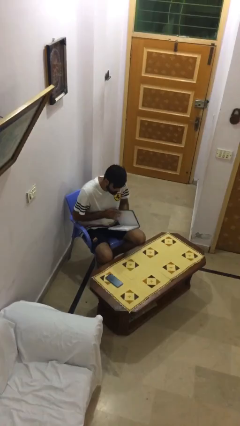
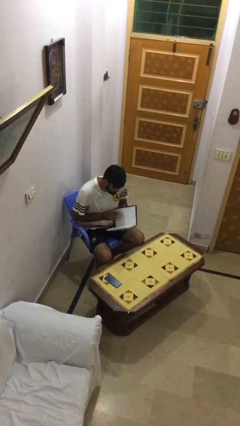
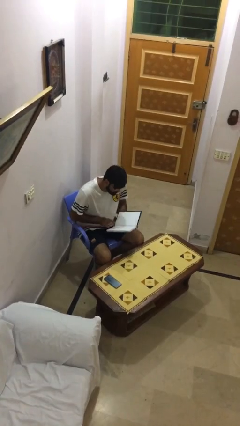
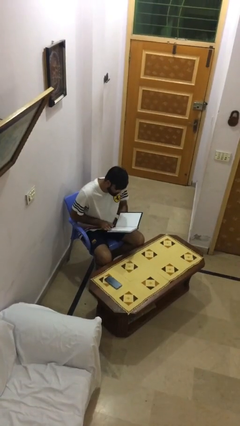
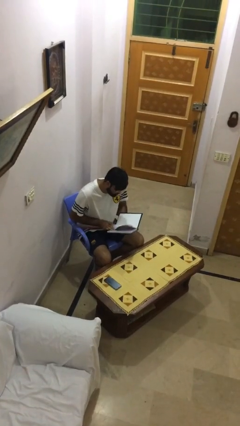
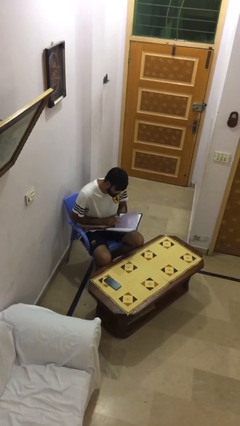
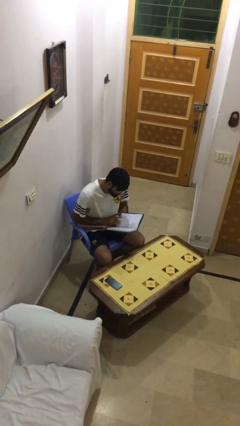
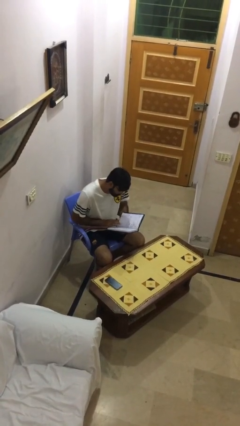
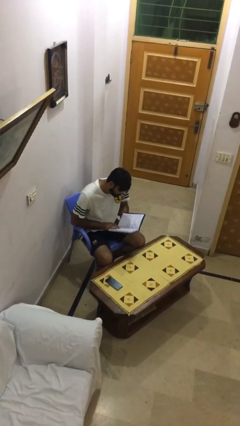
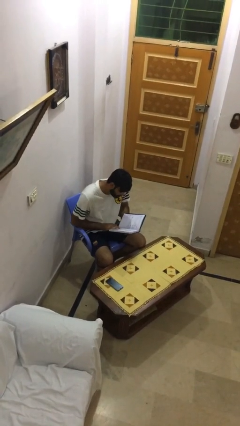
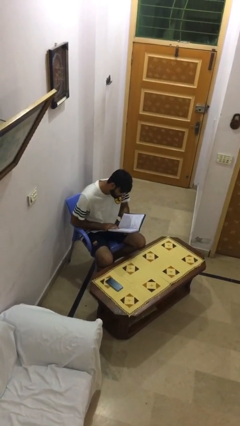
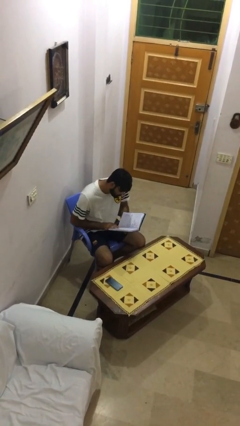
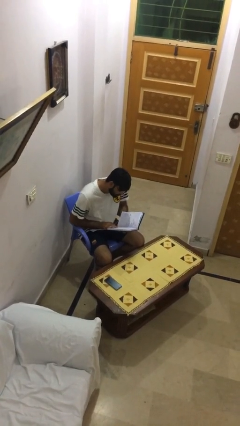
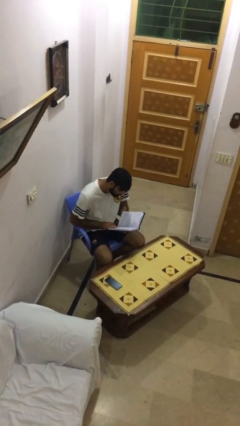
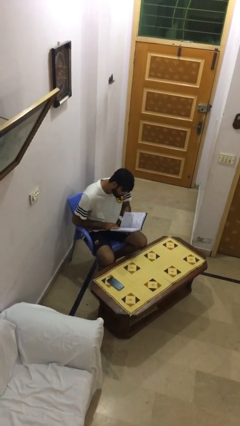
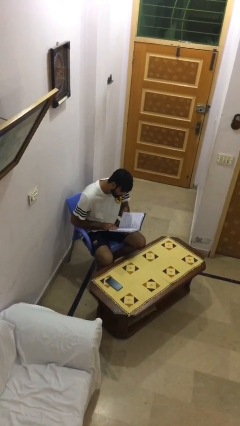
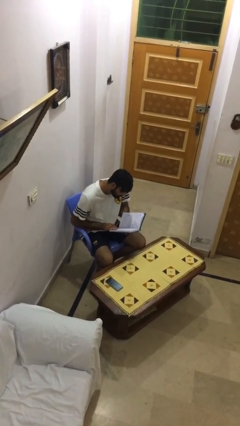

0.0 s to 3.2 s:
person reads document

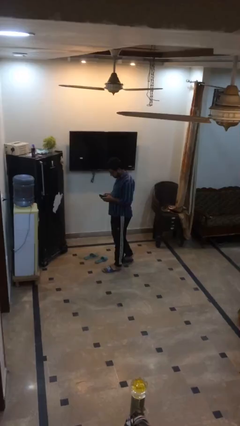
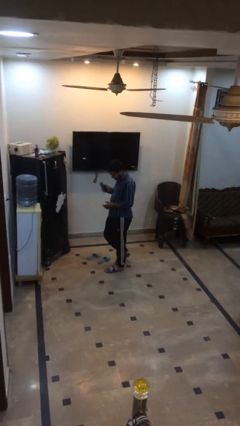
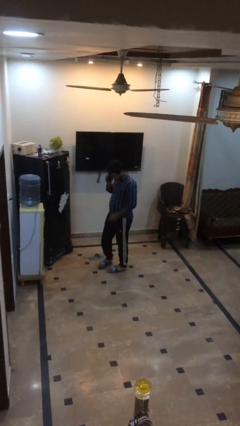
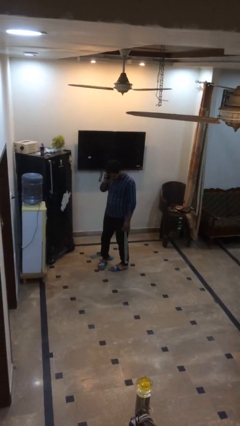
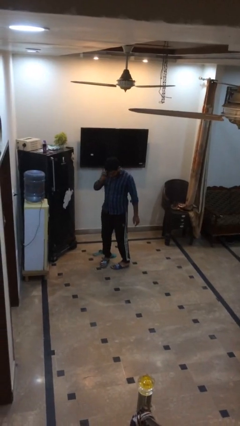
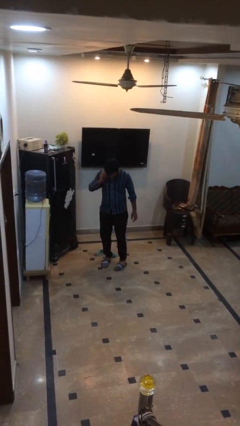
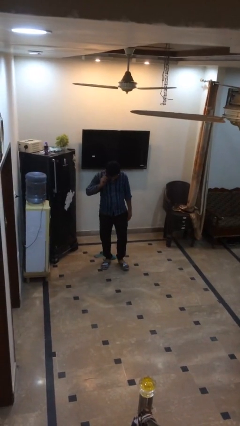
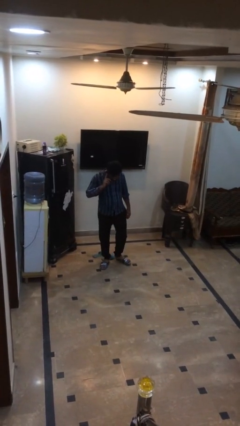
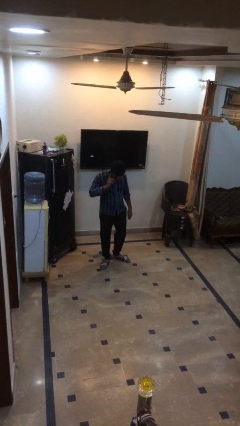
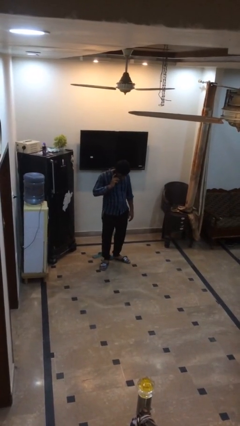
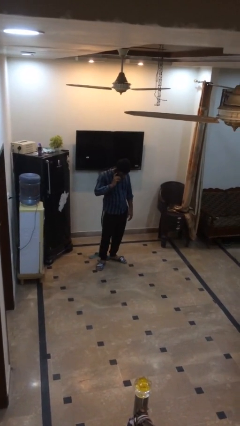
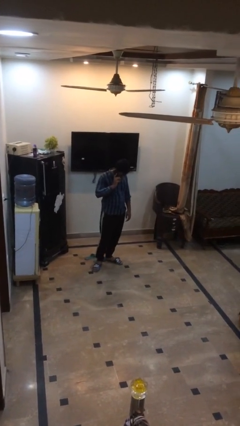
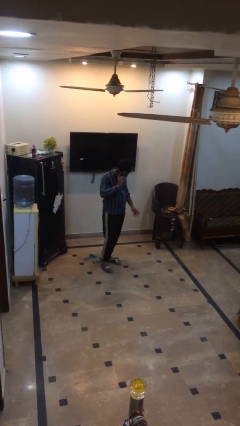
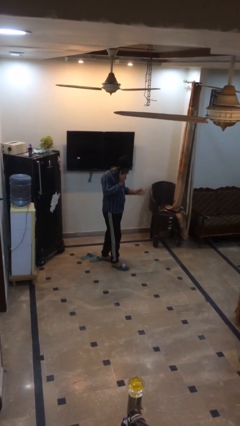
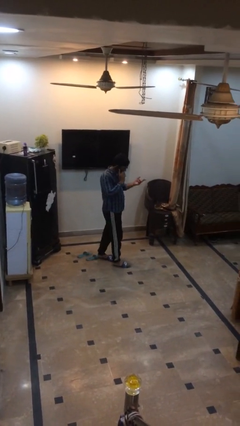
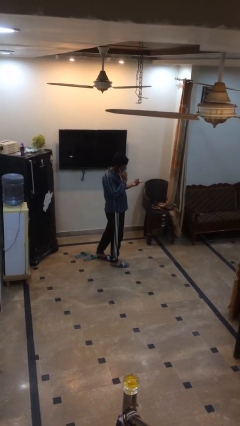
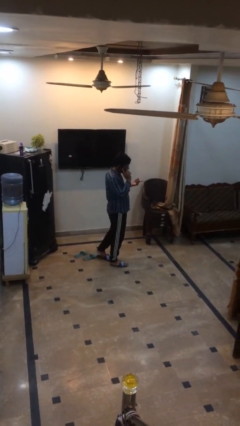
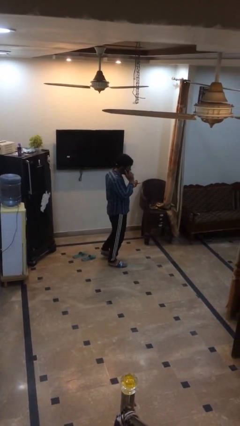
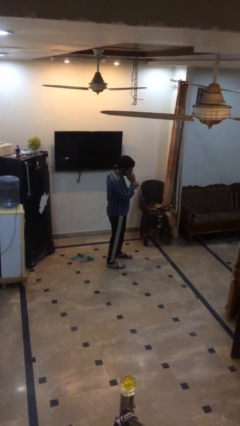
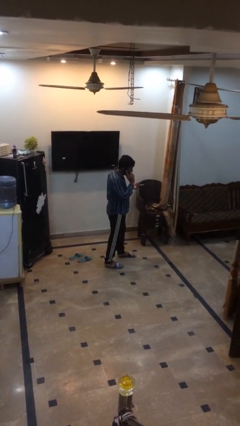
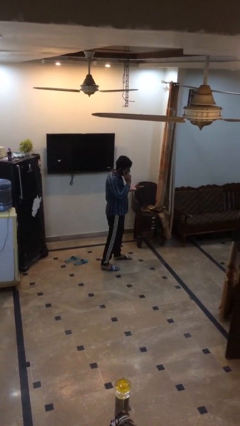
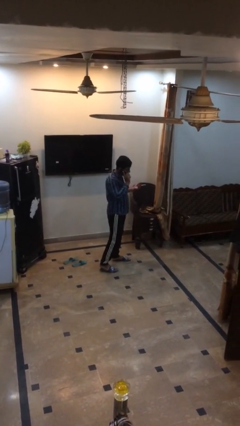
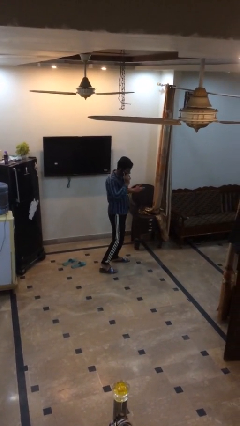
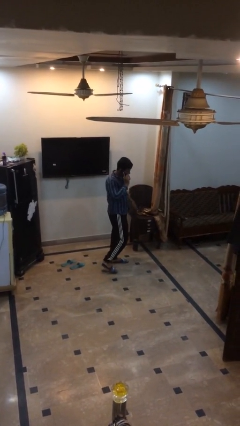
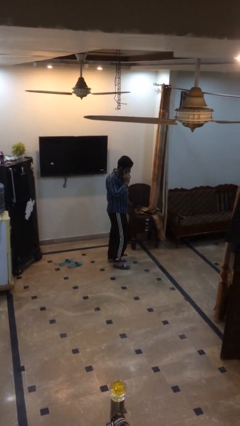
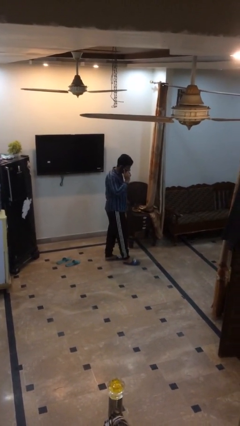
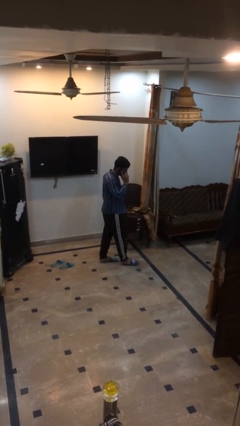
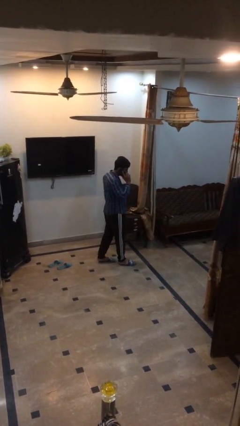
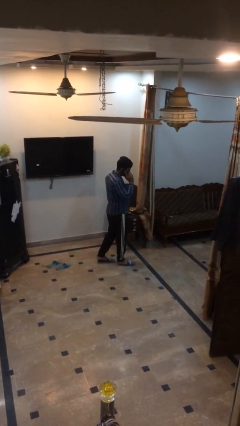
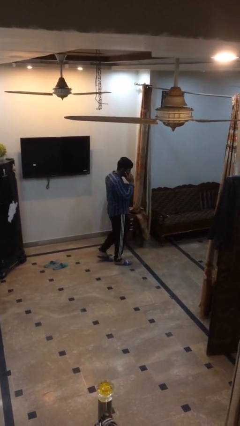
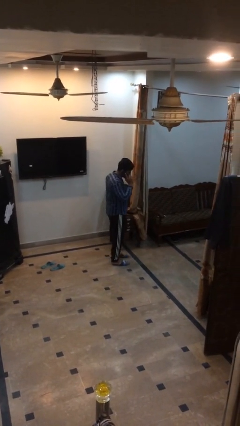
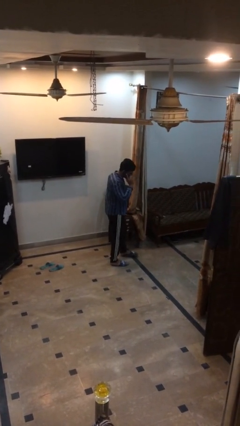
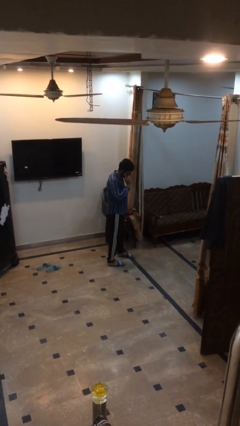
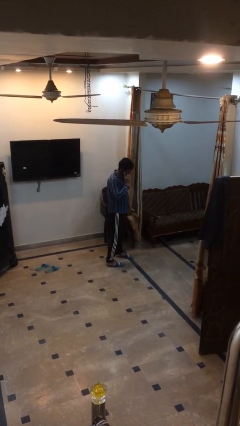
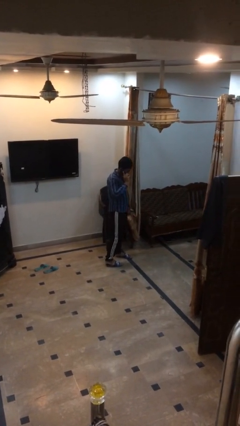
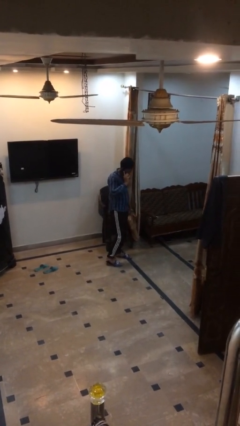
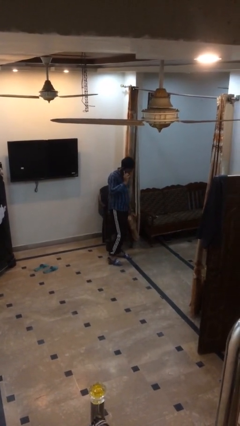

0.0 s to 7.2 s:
person talks on phone

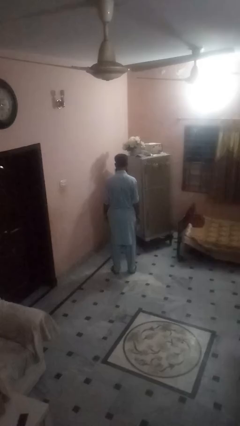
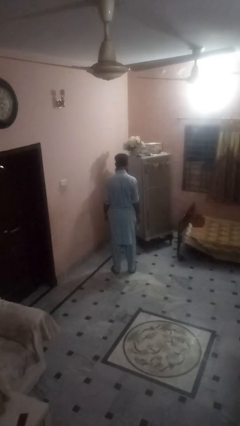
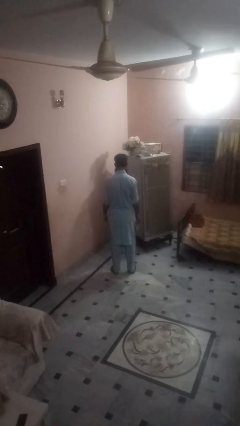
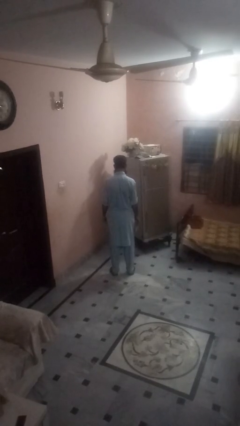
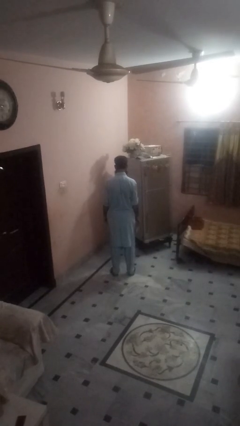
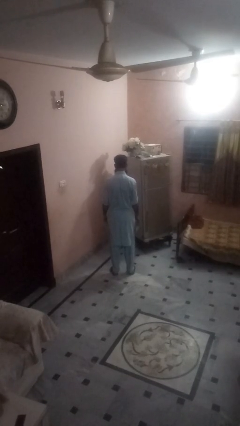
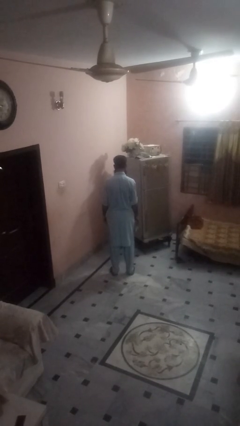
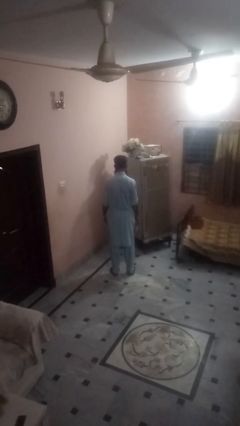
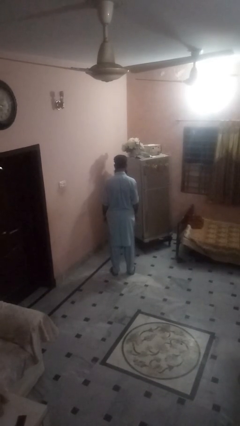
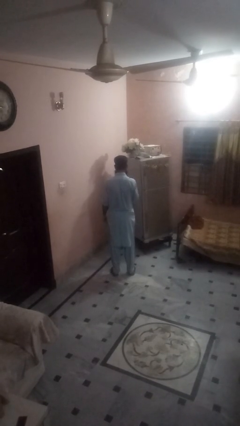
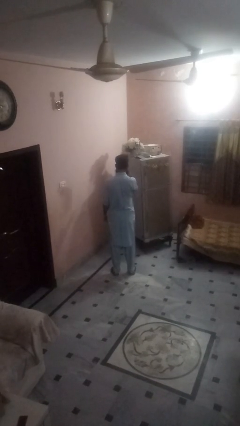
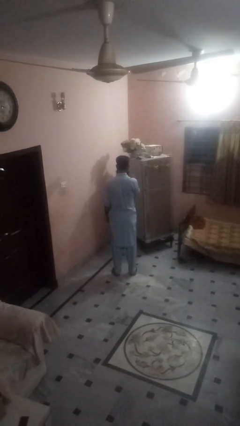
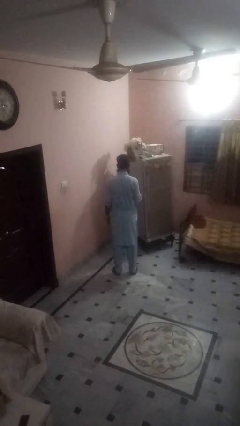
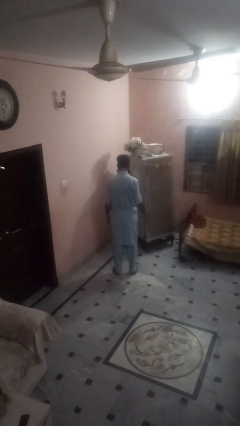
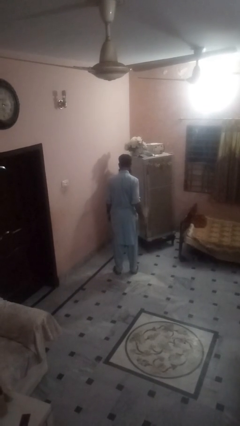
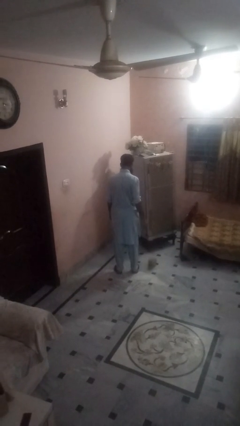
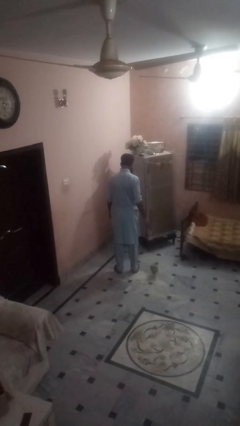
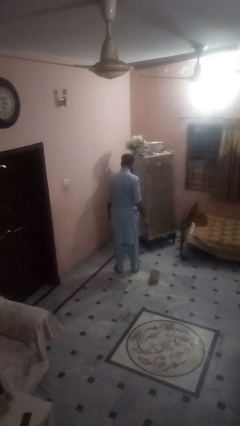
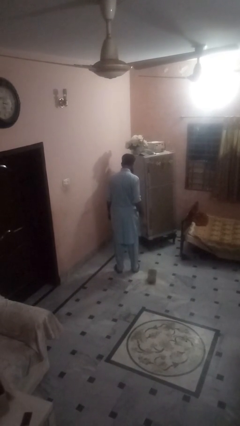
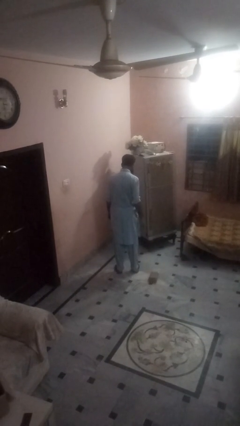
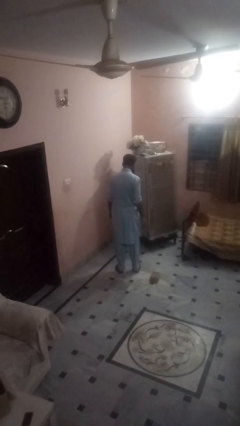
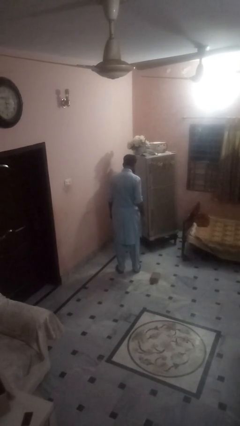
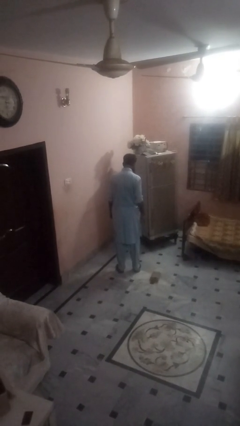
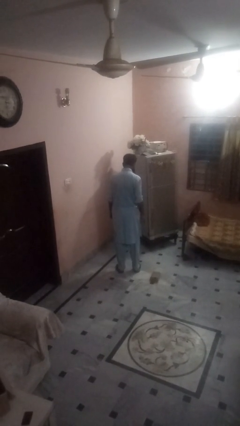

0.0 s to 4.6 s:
person throws object into air

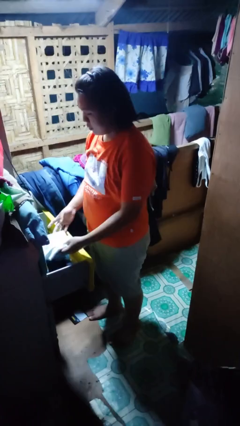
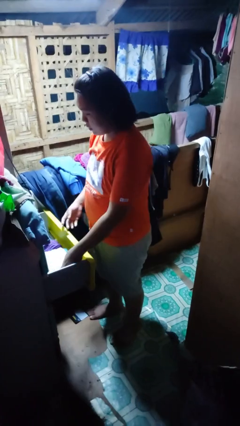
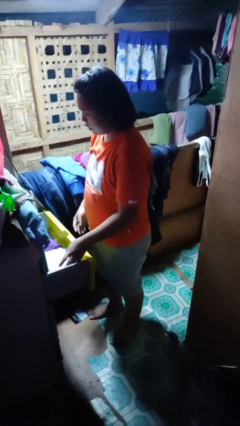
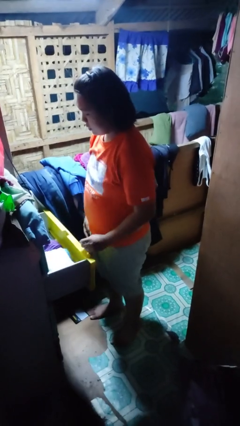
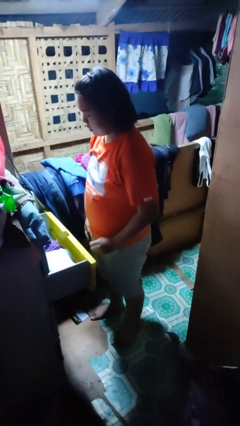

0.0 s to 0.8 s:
person puts clothes into dresser

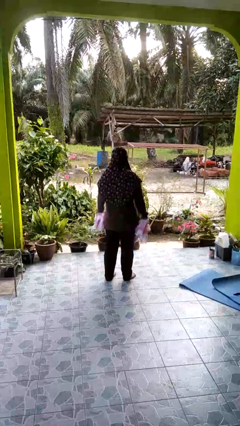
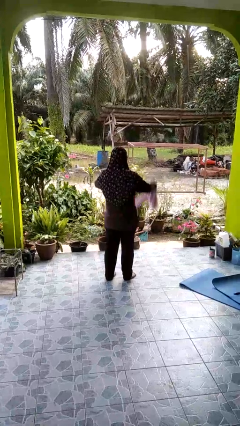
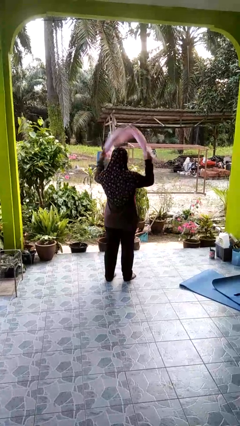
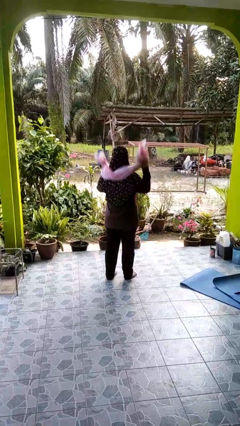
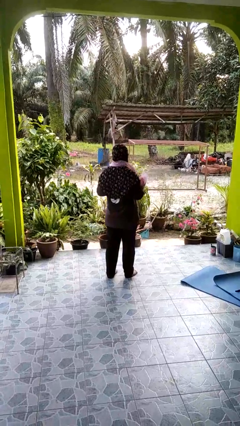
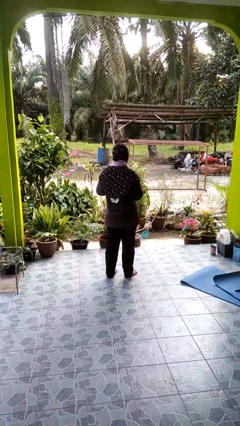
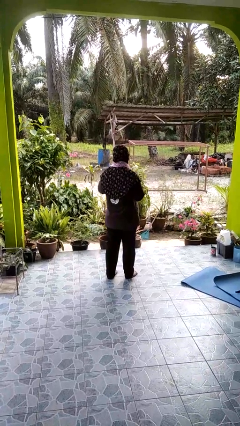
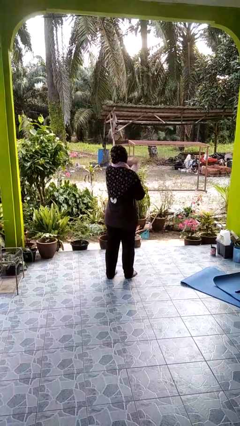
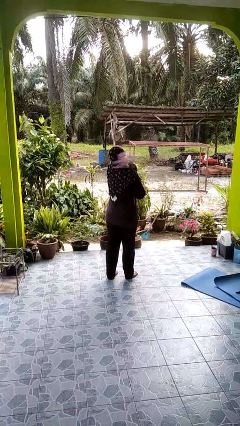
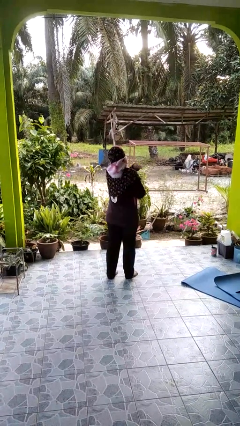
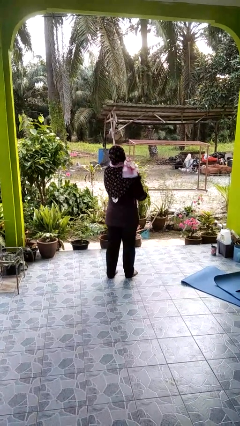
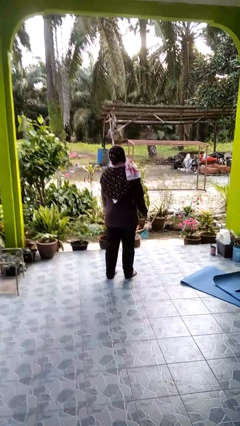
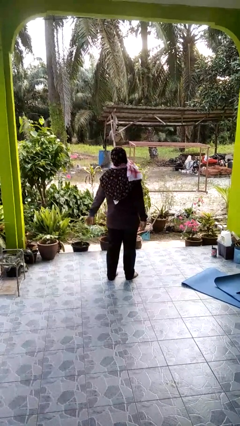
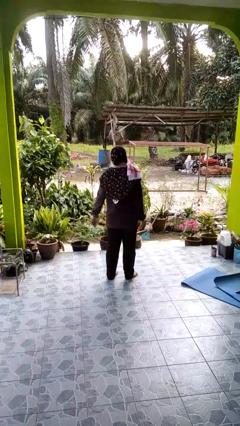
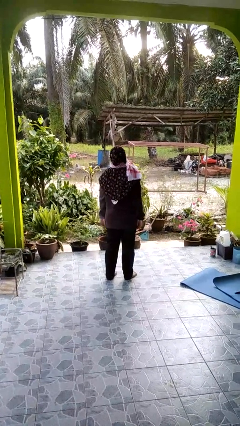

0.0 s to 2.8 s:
person puts on scarf
